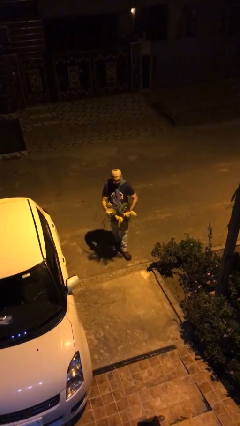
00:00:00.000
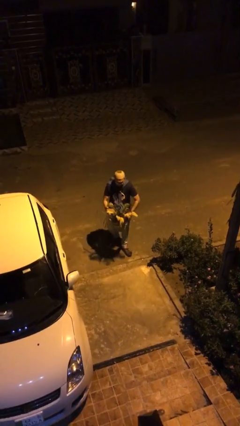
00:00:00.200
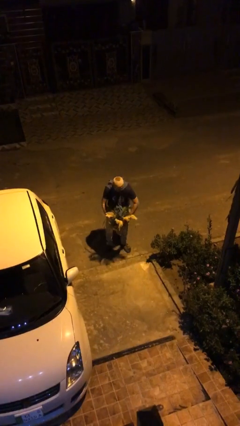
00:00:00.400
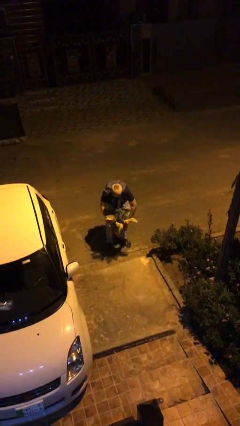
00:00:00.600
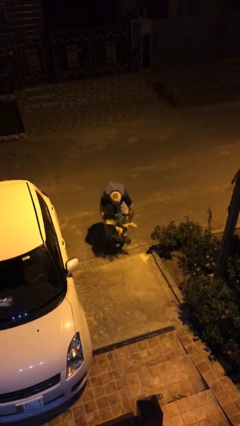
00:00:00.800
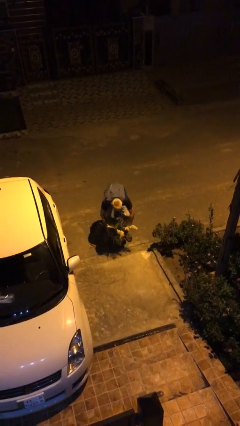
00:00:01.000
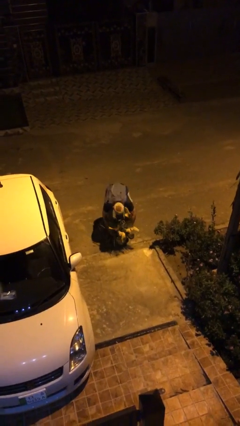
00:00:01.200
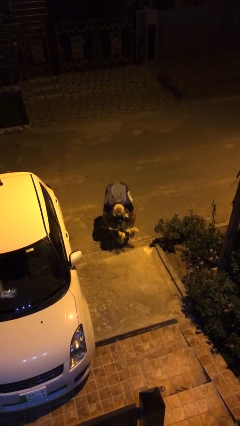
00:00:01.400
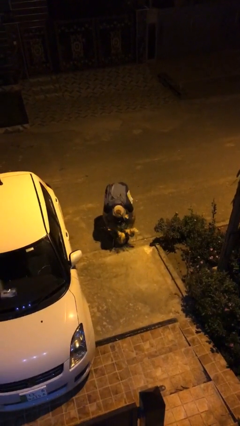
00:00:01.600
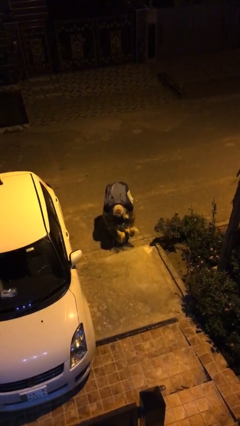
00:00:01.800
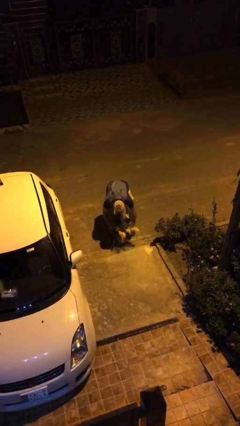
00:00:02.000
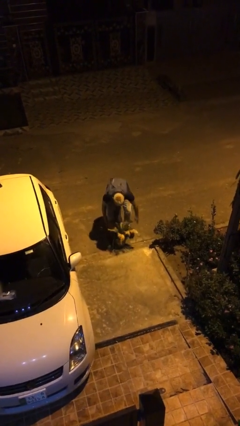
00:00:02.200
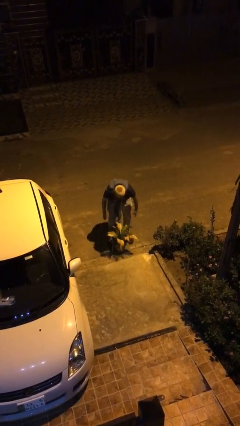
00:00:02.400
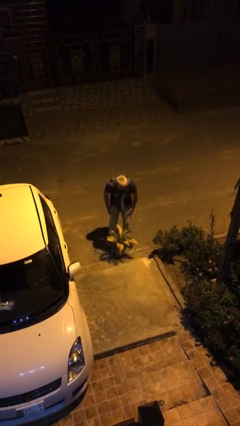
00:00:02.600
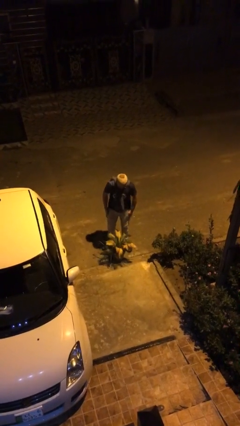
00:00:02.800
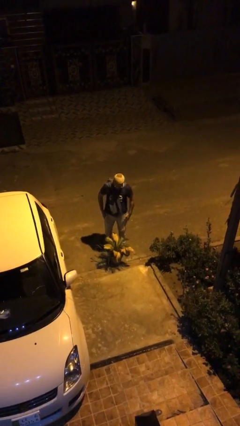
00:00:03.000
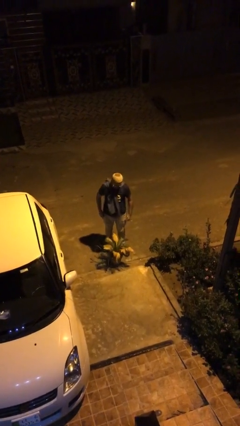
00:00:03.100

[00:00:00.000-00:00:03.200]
person puts down object on floor

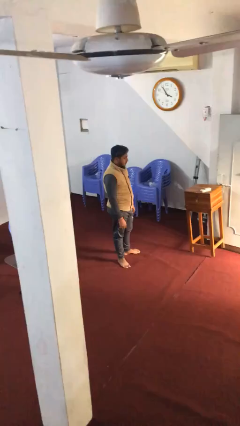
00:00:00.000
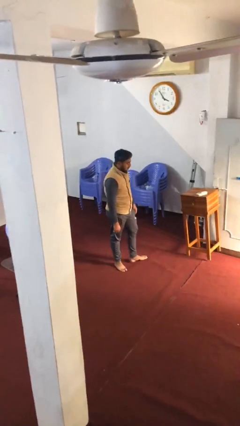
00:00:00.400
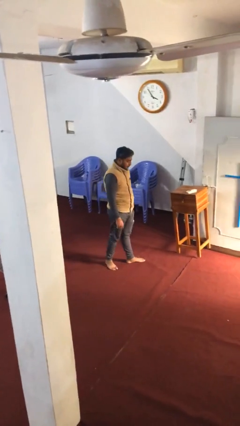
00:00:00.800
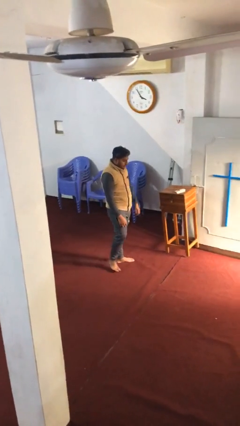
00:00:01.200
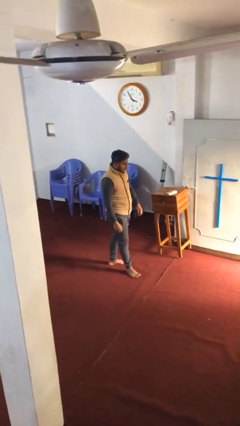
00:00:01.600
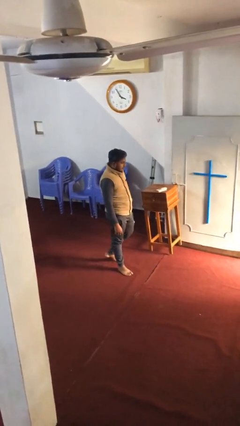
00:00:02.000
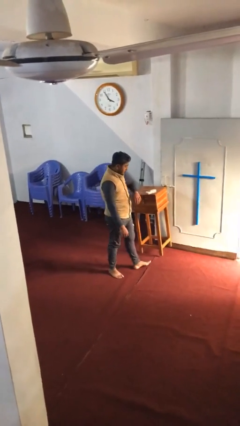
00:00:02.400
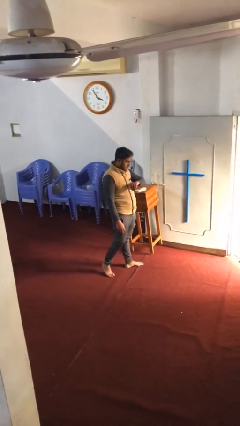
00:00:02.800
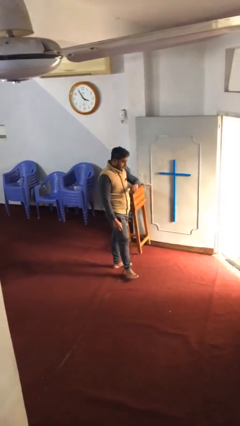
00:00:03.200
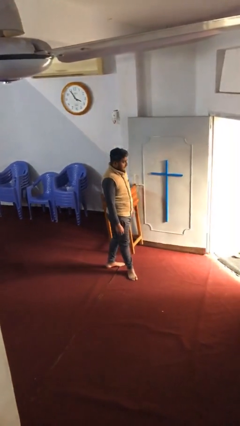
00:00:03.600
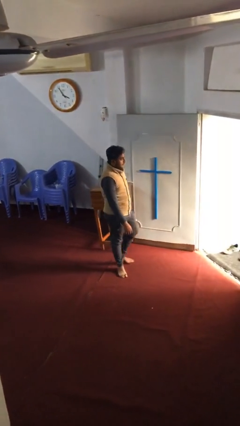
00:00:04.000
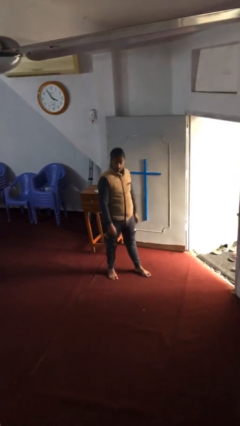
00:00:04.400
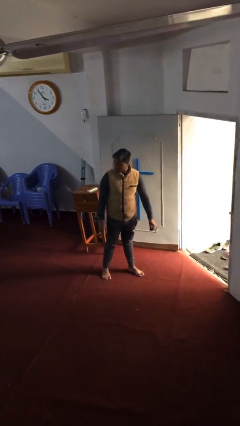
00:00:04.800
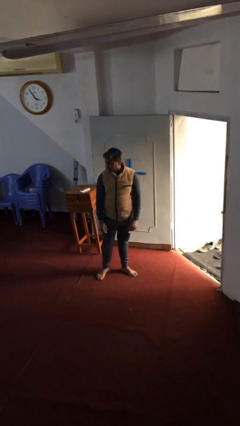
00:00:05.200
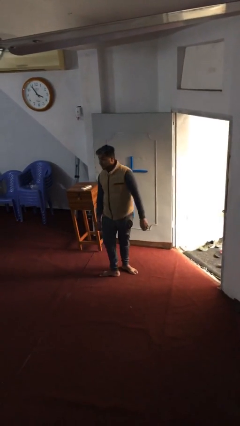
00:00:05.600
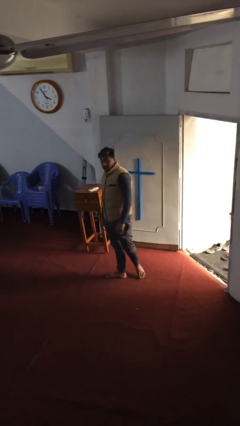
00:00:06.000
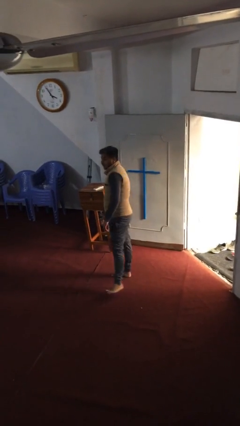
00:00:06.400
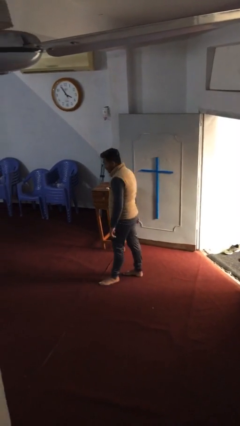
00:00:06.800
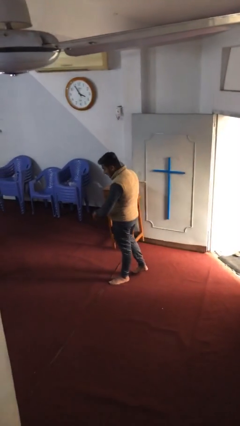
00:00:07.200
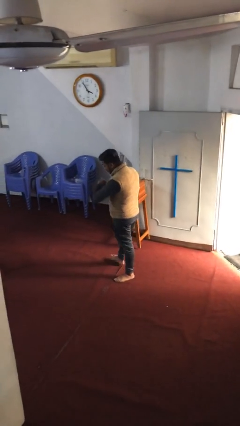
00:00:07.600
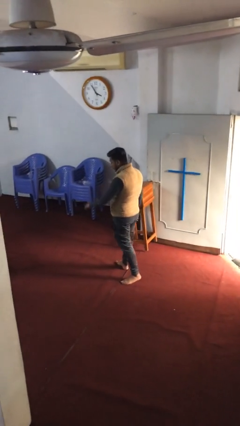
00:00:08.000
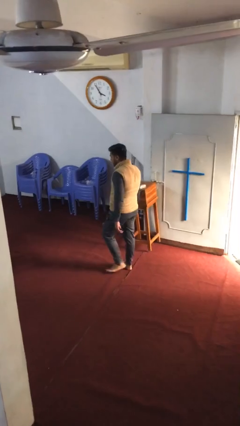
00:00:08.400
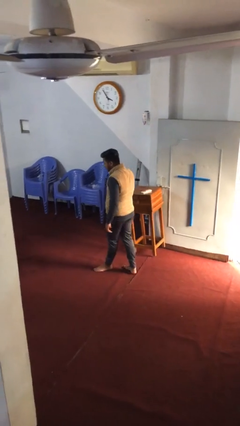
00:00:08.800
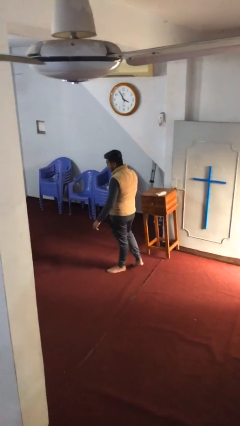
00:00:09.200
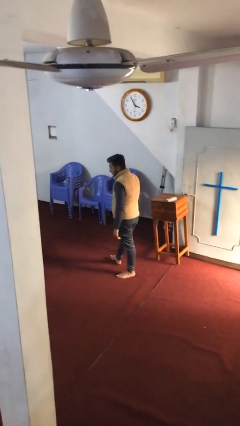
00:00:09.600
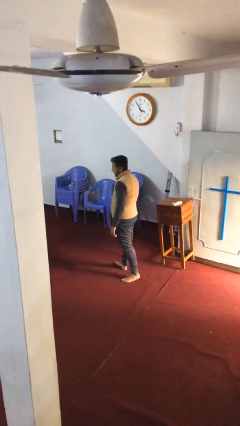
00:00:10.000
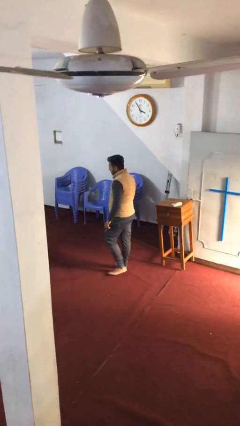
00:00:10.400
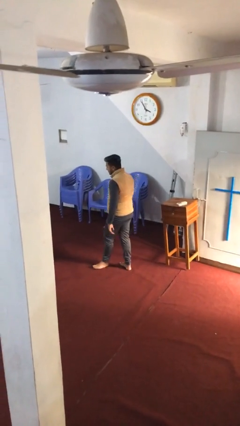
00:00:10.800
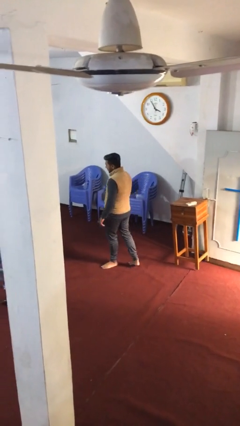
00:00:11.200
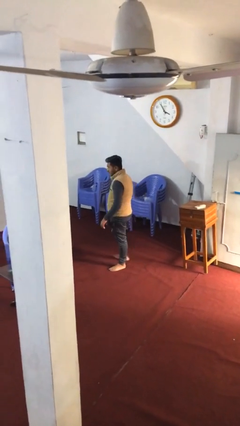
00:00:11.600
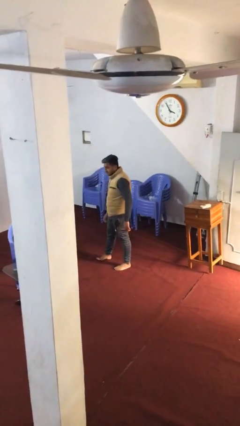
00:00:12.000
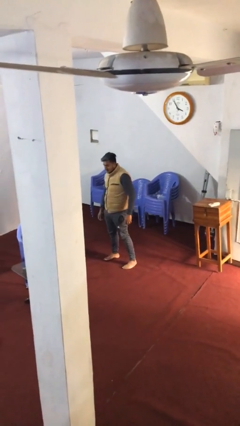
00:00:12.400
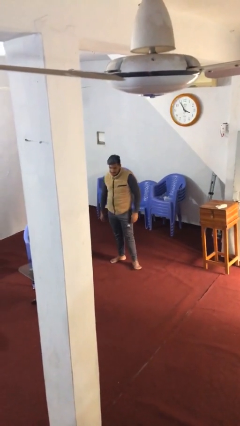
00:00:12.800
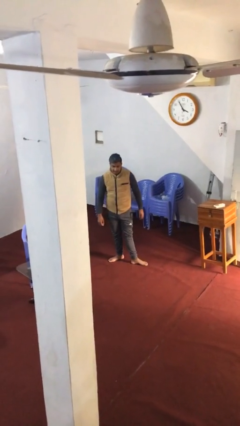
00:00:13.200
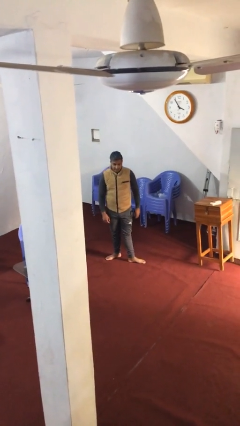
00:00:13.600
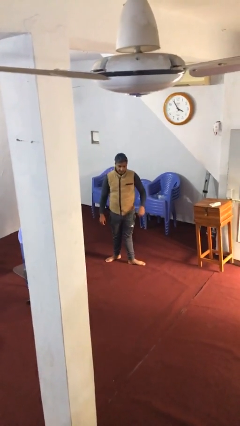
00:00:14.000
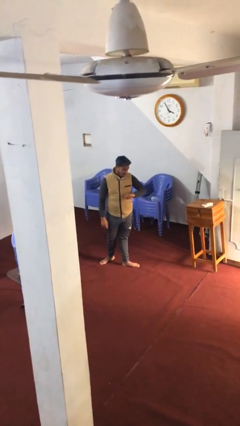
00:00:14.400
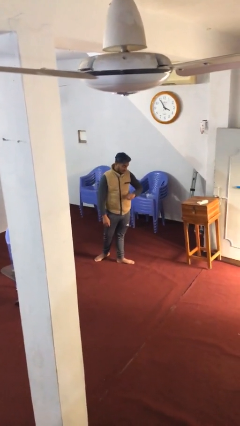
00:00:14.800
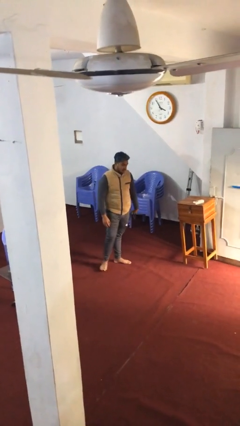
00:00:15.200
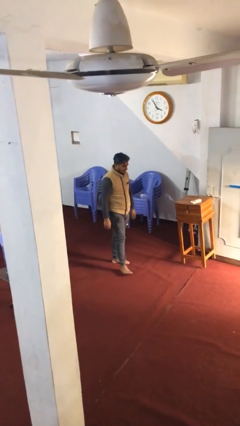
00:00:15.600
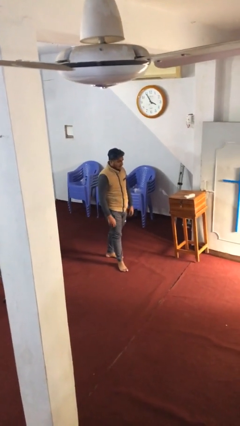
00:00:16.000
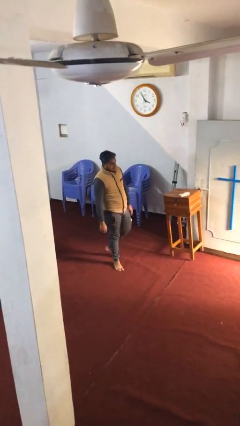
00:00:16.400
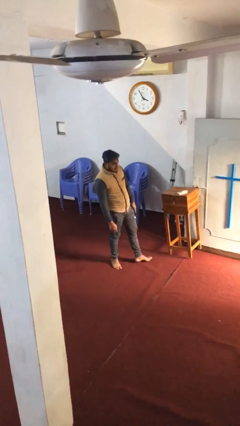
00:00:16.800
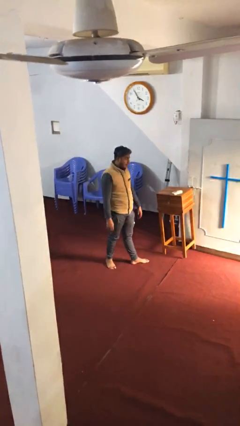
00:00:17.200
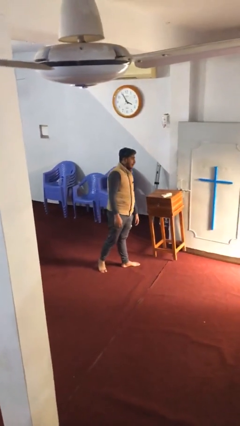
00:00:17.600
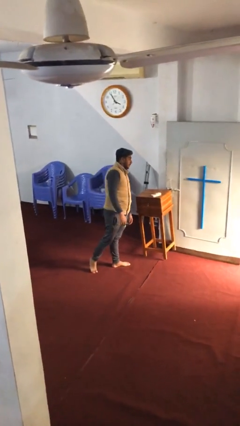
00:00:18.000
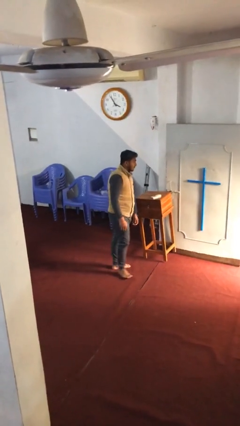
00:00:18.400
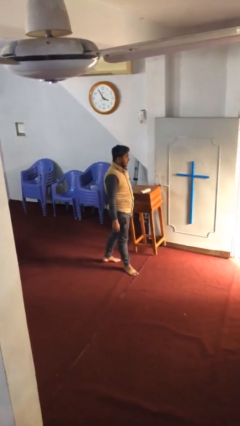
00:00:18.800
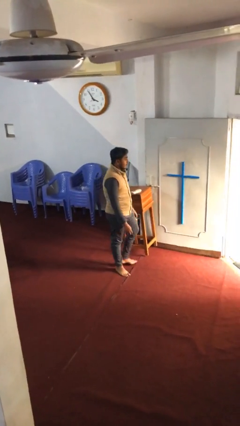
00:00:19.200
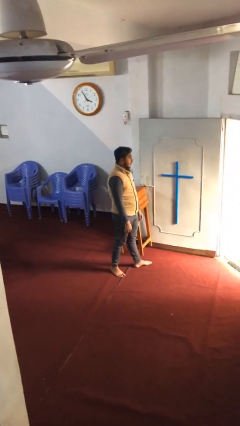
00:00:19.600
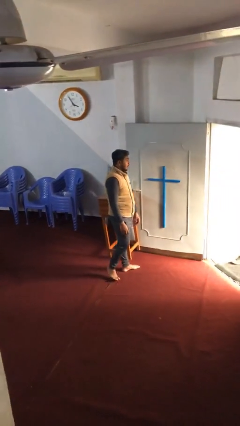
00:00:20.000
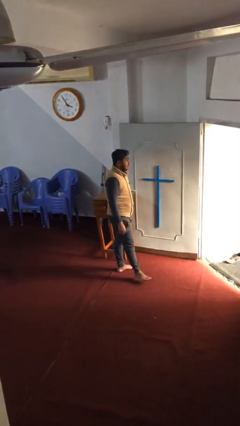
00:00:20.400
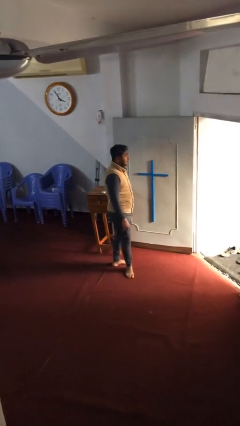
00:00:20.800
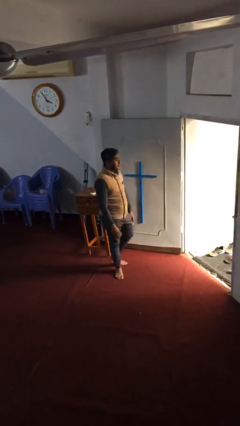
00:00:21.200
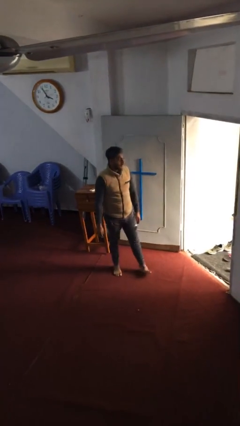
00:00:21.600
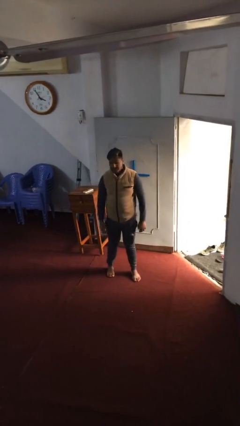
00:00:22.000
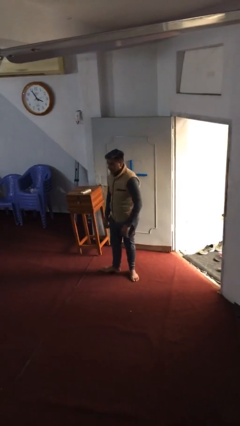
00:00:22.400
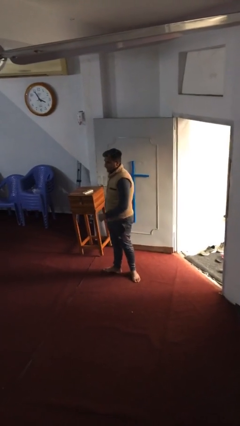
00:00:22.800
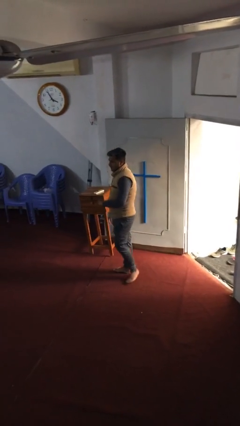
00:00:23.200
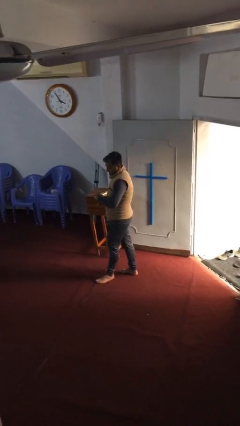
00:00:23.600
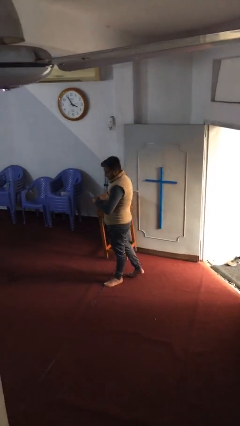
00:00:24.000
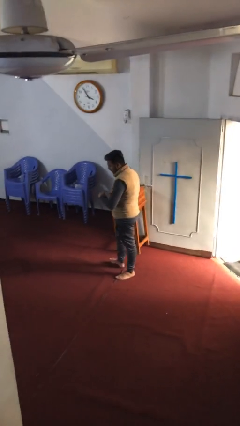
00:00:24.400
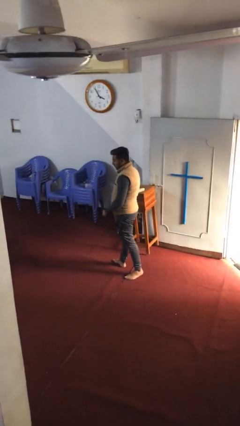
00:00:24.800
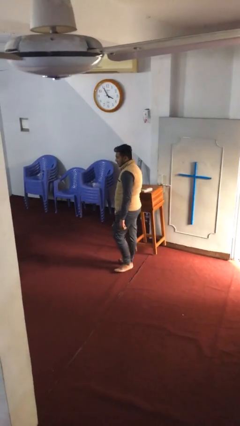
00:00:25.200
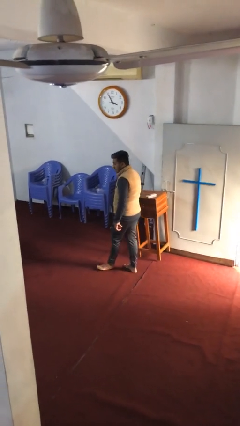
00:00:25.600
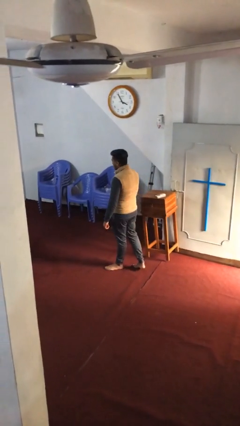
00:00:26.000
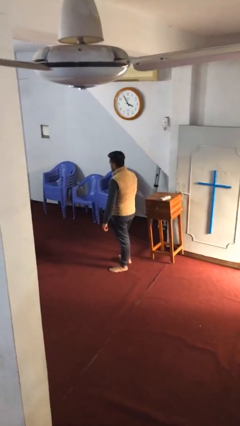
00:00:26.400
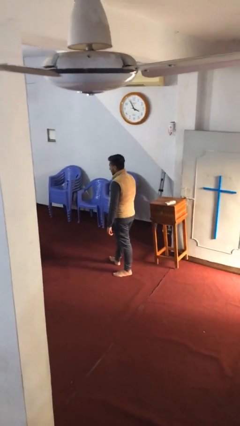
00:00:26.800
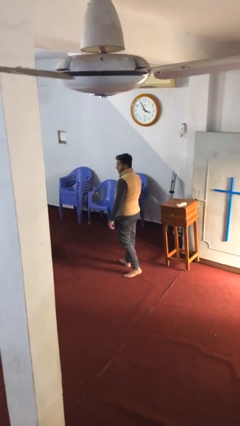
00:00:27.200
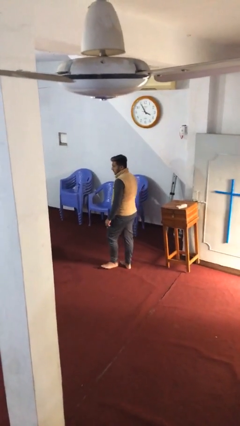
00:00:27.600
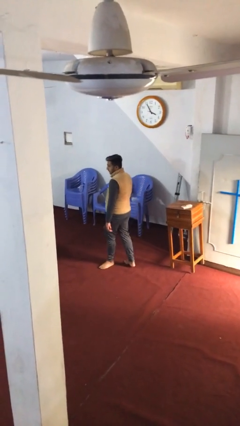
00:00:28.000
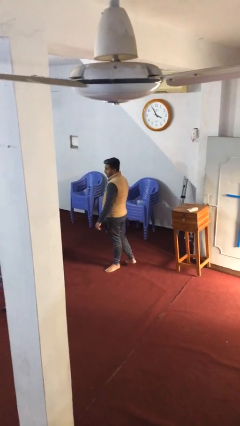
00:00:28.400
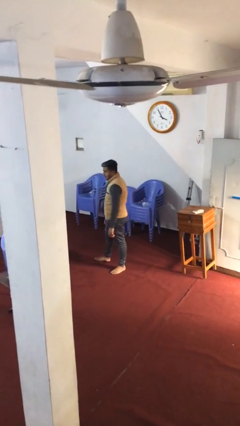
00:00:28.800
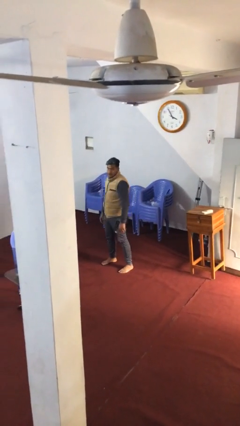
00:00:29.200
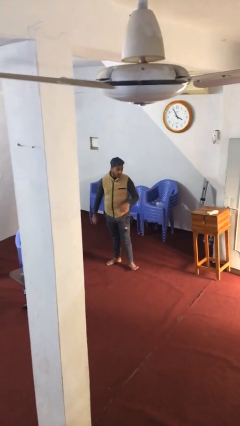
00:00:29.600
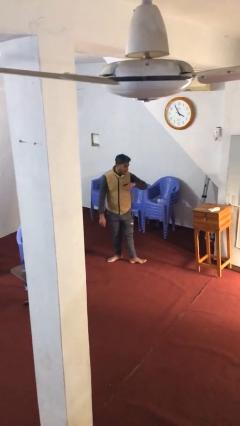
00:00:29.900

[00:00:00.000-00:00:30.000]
person walks
